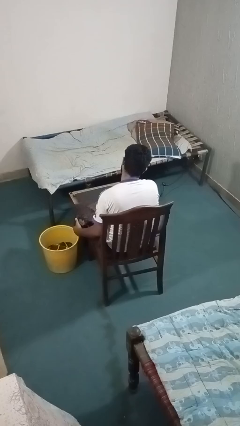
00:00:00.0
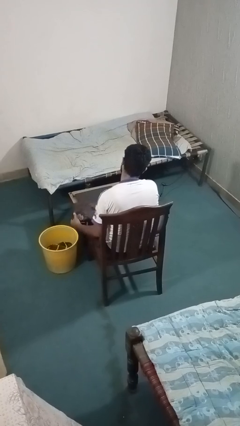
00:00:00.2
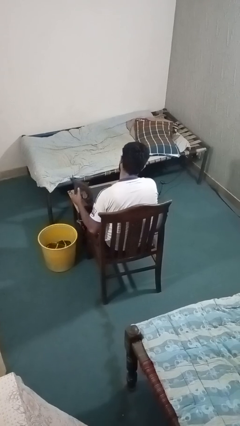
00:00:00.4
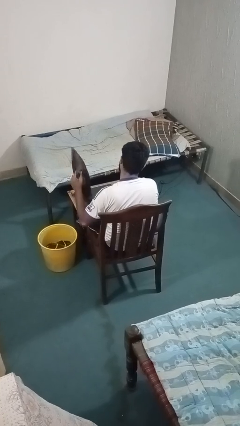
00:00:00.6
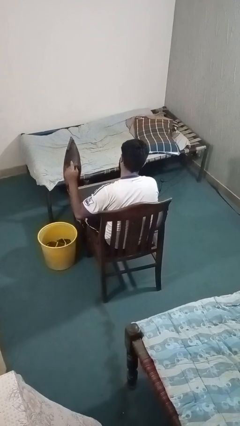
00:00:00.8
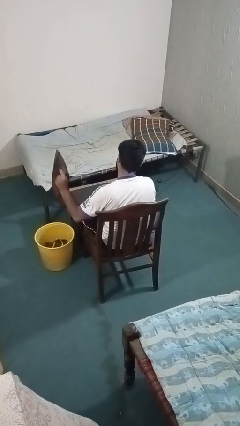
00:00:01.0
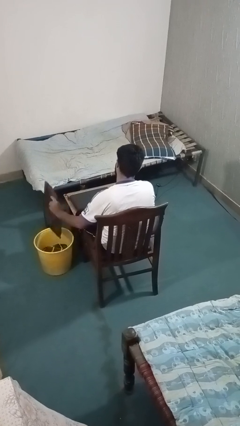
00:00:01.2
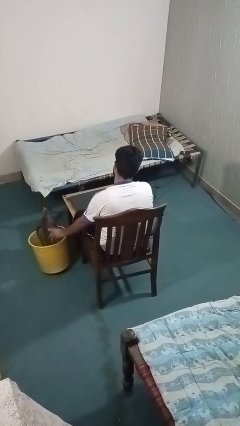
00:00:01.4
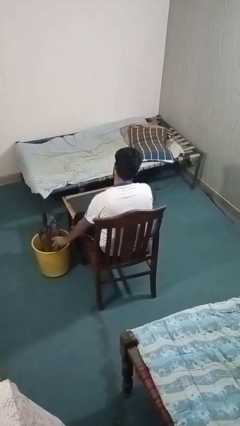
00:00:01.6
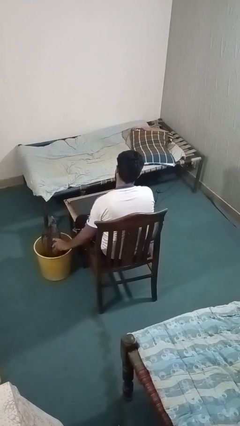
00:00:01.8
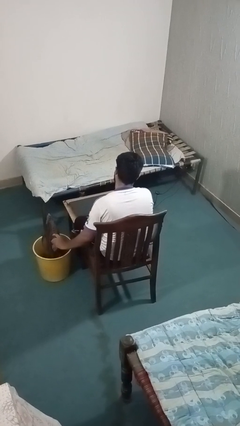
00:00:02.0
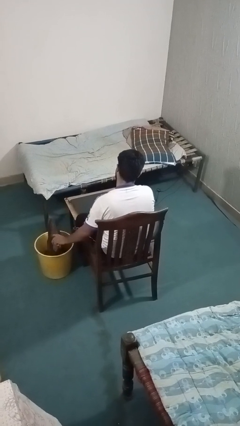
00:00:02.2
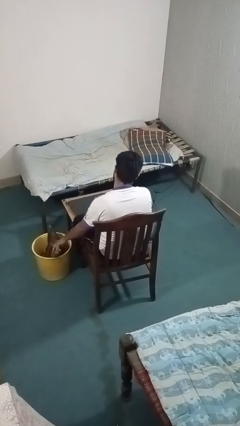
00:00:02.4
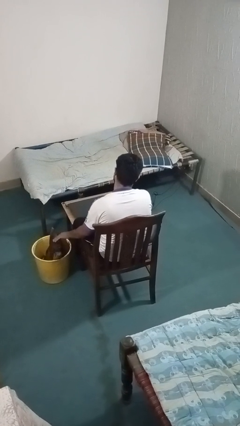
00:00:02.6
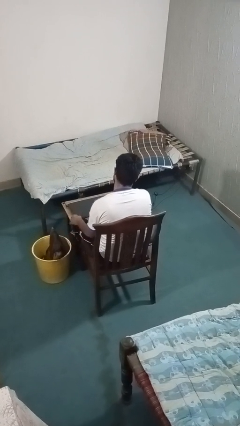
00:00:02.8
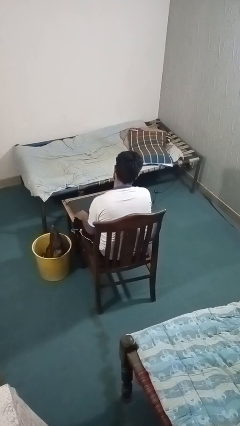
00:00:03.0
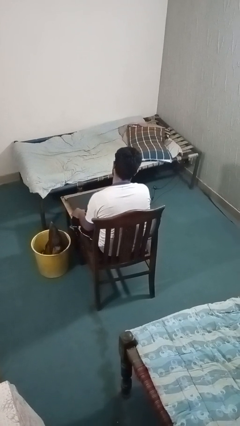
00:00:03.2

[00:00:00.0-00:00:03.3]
person puts object into basket

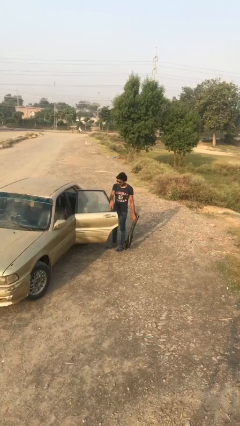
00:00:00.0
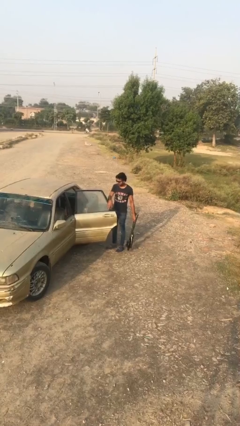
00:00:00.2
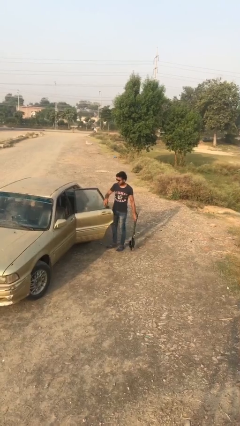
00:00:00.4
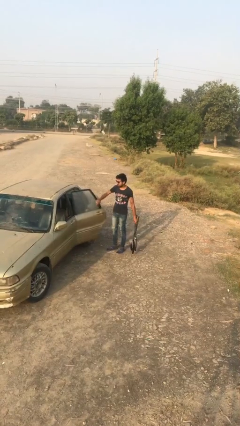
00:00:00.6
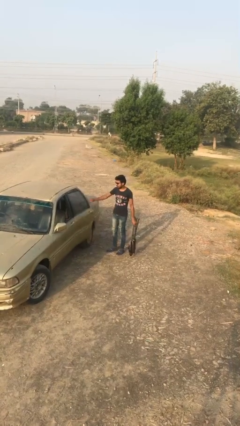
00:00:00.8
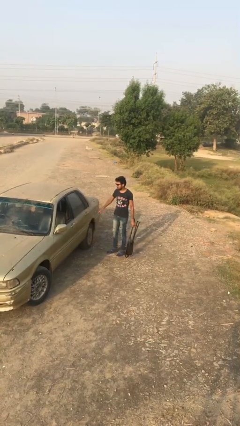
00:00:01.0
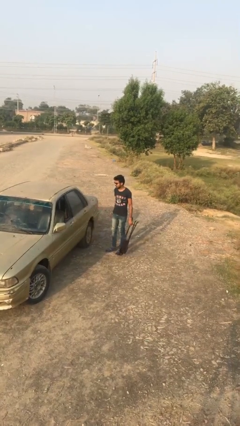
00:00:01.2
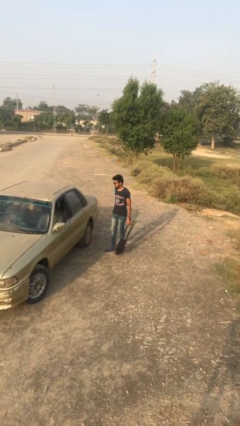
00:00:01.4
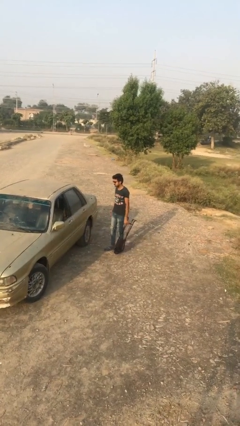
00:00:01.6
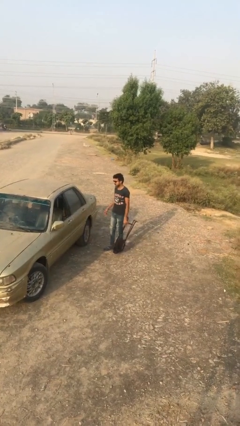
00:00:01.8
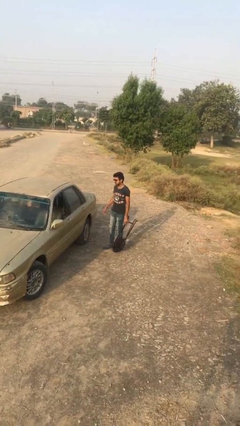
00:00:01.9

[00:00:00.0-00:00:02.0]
person closes car door

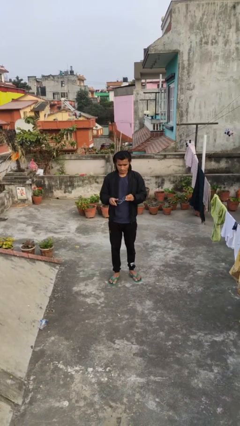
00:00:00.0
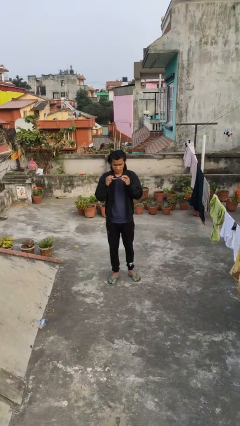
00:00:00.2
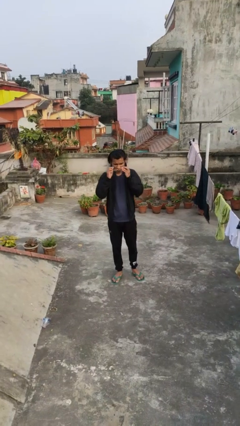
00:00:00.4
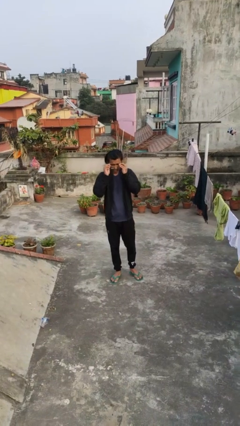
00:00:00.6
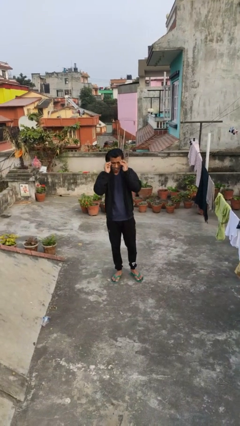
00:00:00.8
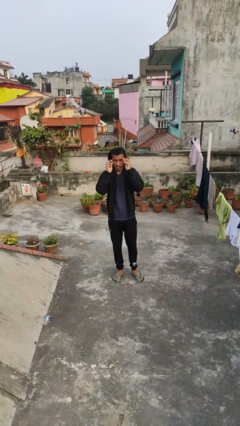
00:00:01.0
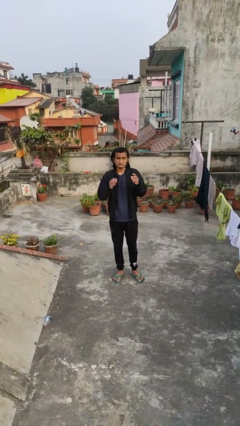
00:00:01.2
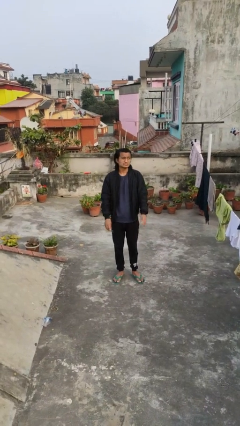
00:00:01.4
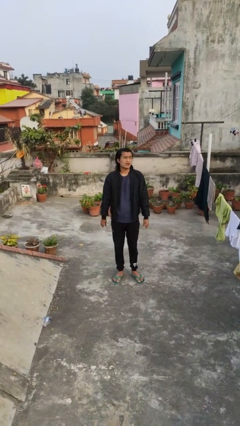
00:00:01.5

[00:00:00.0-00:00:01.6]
person puts on glasses

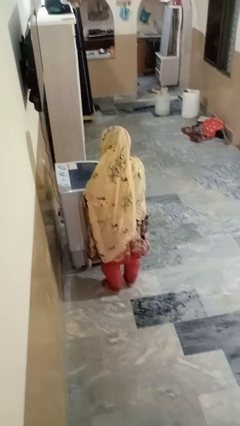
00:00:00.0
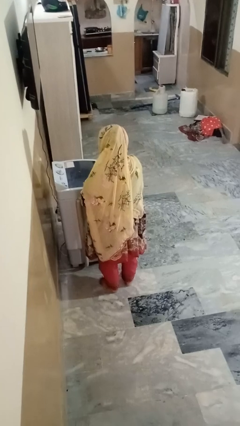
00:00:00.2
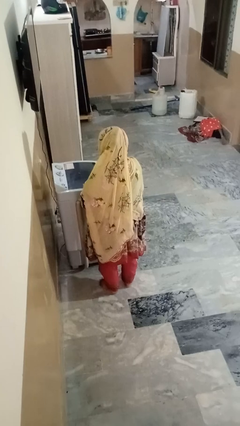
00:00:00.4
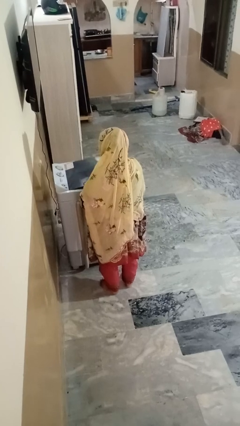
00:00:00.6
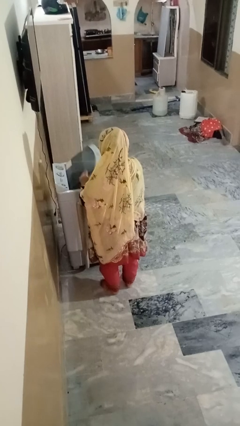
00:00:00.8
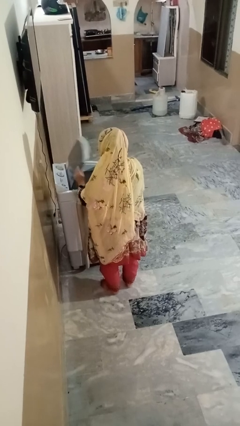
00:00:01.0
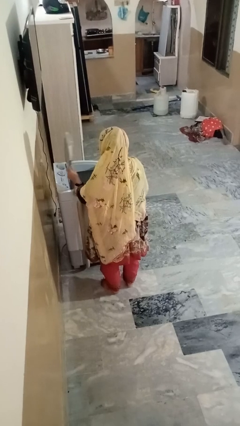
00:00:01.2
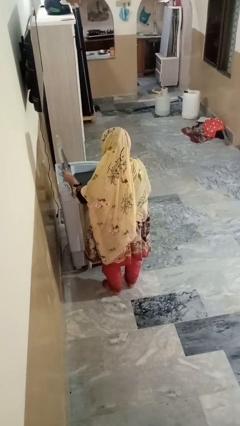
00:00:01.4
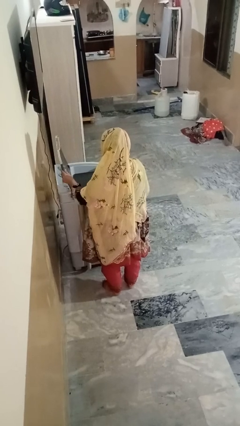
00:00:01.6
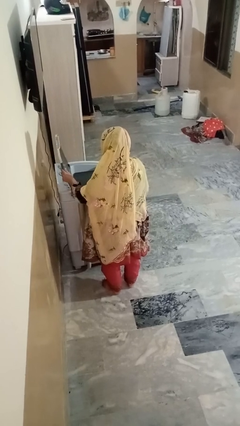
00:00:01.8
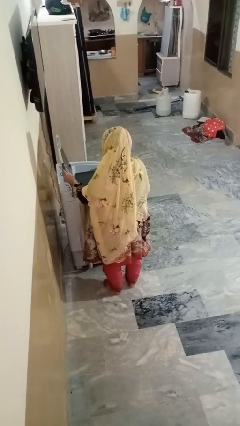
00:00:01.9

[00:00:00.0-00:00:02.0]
person opens clothes washer

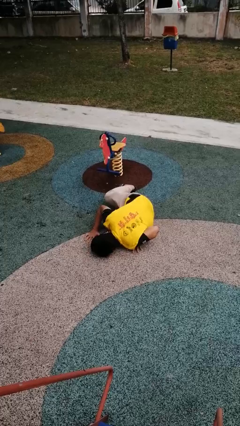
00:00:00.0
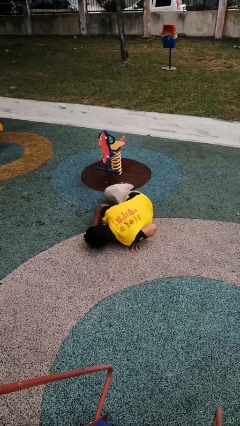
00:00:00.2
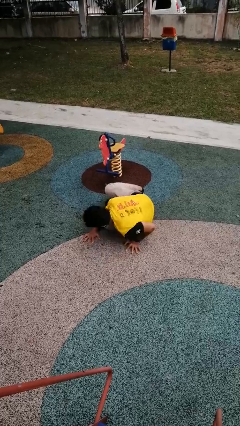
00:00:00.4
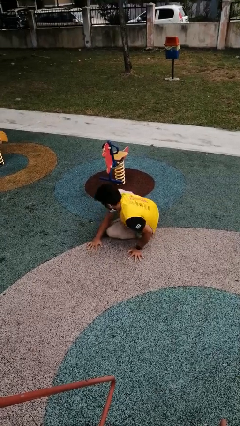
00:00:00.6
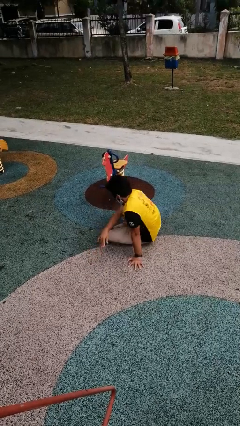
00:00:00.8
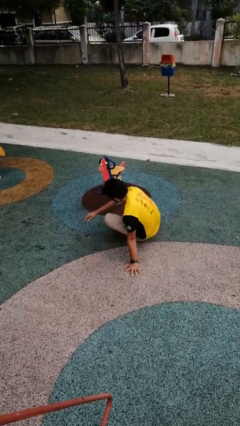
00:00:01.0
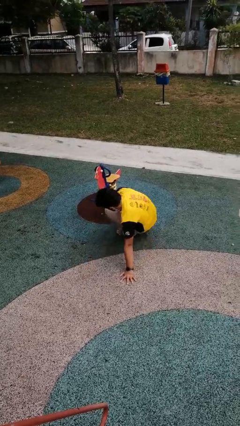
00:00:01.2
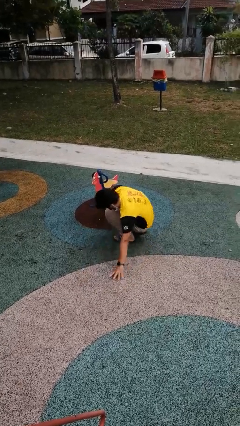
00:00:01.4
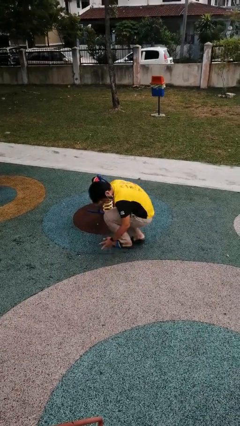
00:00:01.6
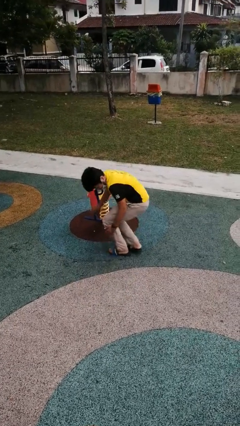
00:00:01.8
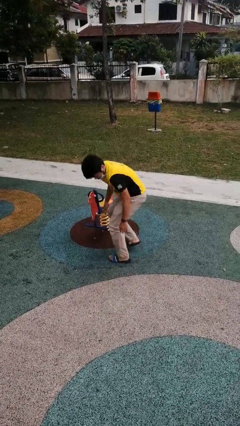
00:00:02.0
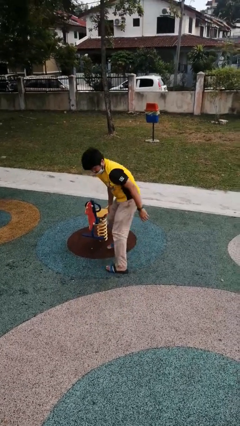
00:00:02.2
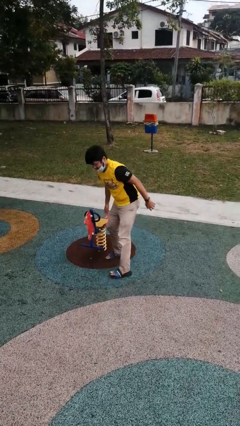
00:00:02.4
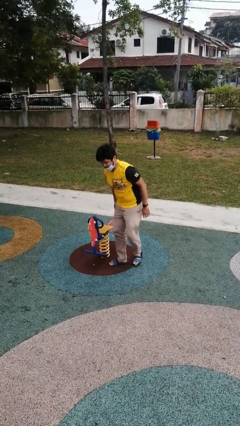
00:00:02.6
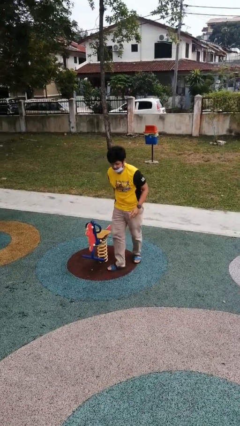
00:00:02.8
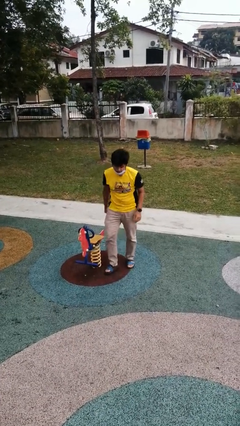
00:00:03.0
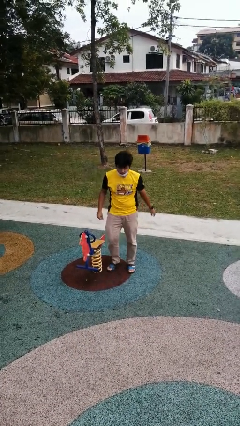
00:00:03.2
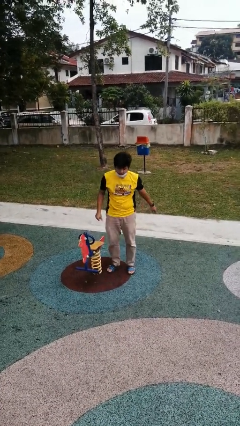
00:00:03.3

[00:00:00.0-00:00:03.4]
person stands up from floor

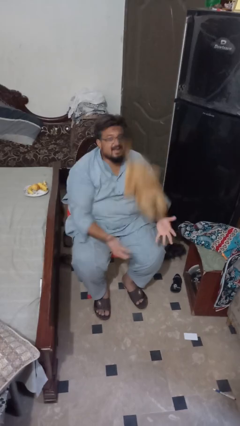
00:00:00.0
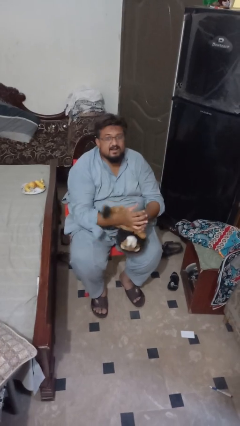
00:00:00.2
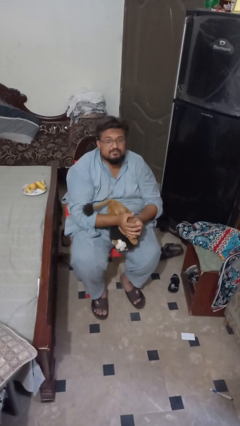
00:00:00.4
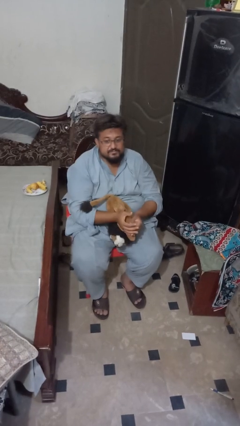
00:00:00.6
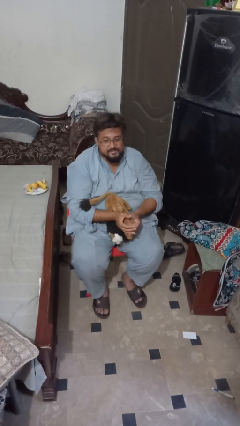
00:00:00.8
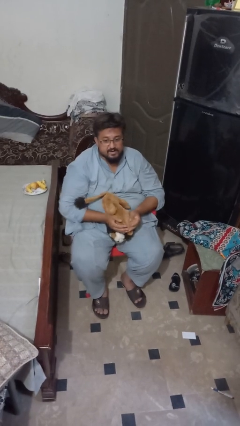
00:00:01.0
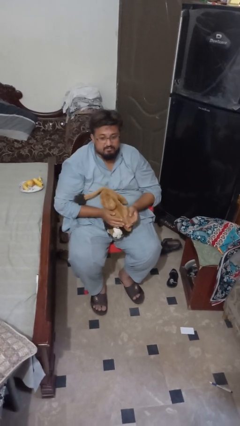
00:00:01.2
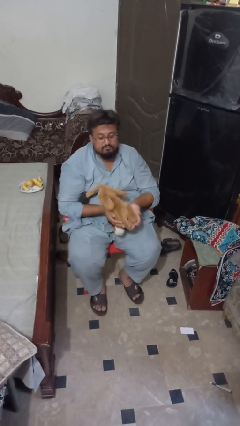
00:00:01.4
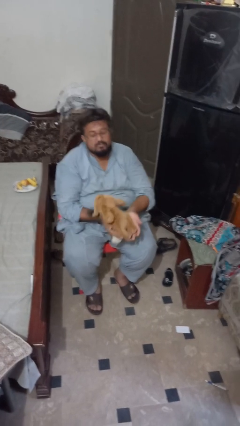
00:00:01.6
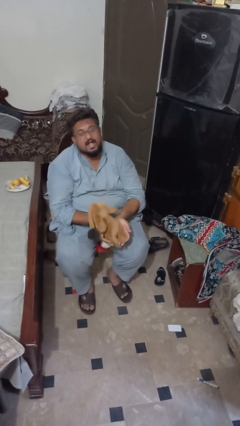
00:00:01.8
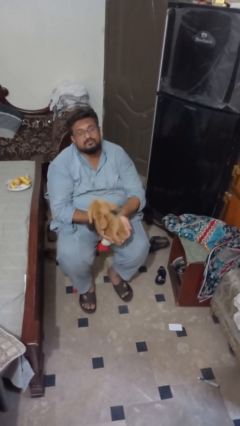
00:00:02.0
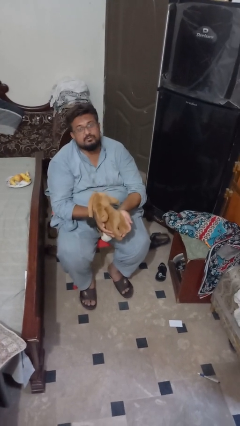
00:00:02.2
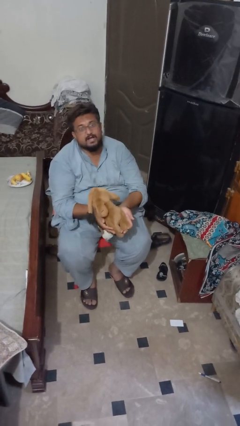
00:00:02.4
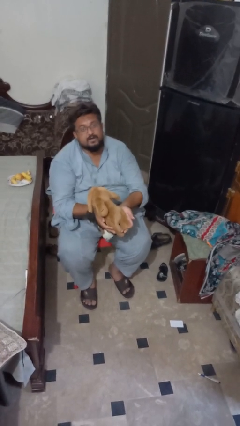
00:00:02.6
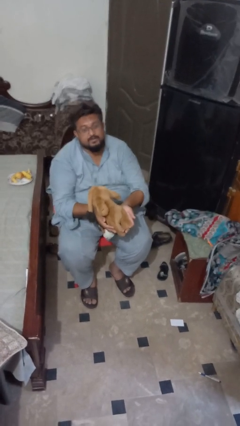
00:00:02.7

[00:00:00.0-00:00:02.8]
person catches dropped object

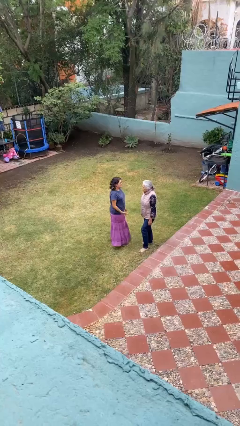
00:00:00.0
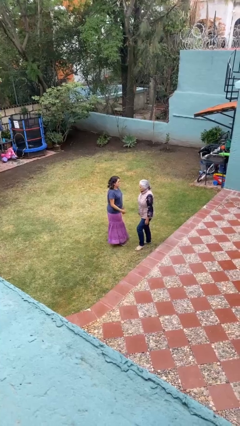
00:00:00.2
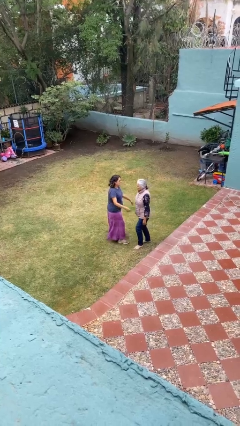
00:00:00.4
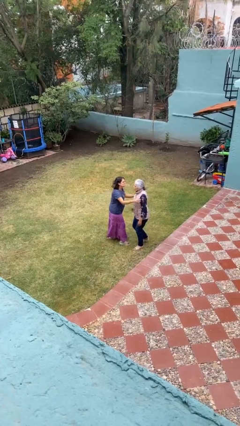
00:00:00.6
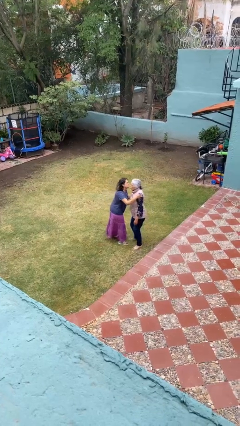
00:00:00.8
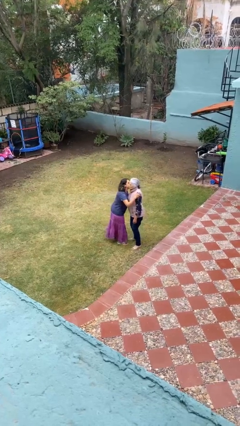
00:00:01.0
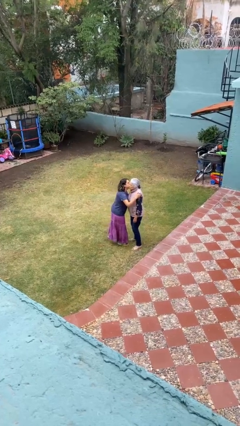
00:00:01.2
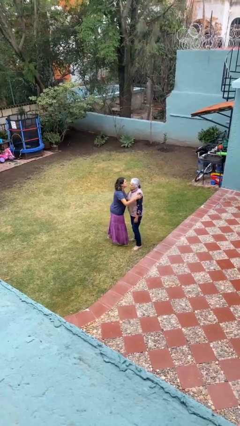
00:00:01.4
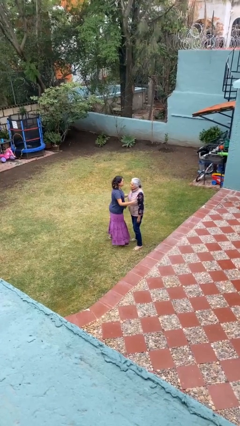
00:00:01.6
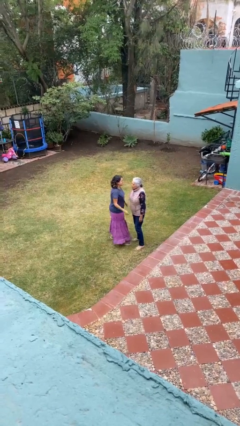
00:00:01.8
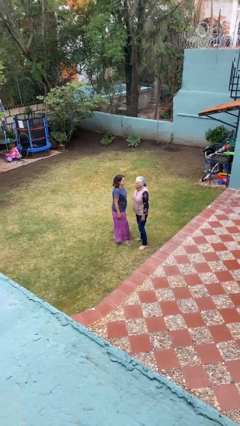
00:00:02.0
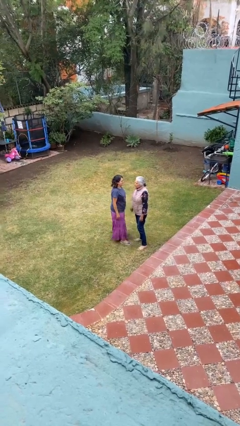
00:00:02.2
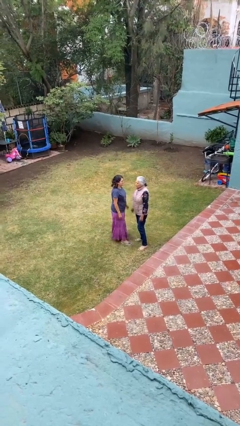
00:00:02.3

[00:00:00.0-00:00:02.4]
person kisses cheek of person
